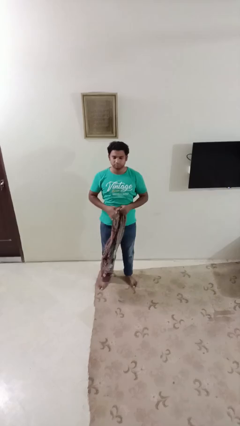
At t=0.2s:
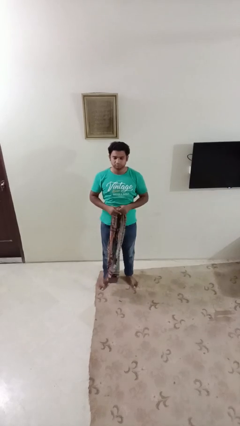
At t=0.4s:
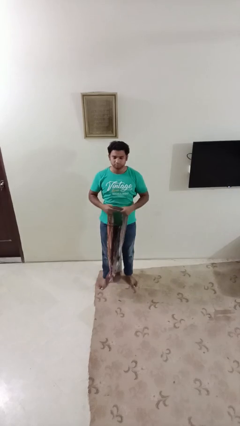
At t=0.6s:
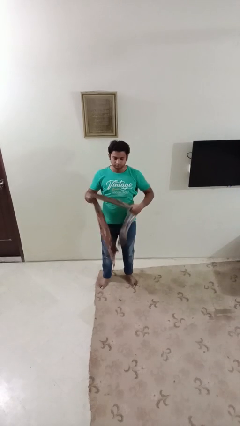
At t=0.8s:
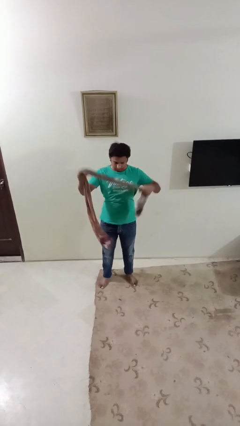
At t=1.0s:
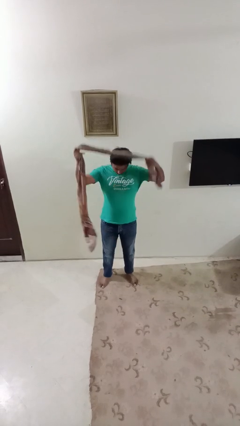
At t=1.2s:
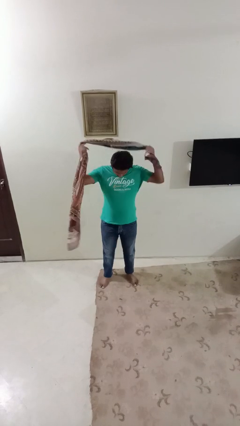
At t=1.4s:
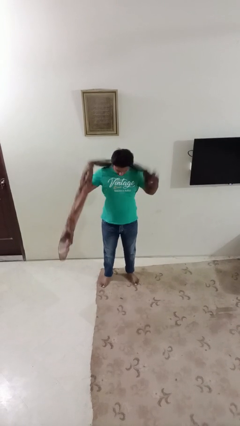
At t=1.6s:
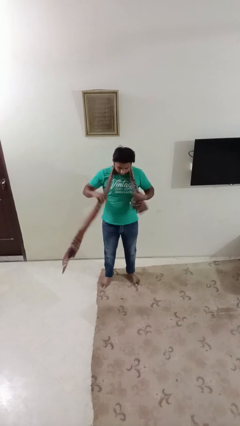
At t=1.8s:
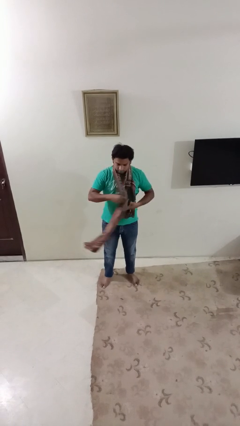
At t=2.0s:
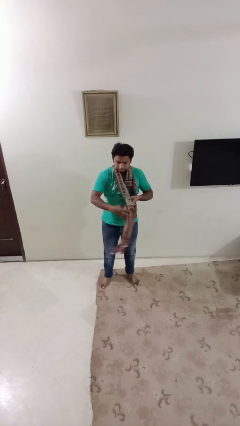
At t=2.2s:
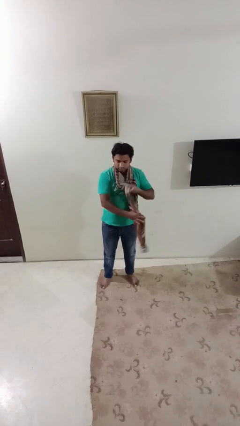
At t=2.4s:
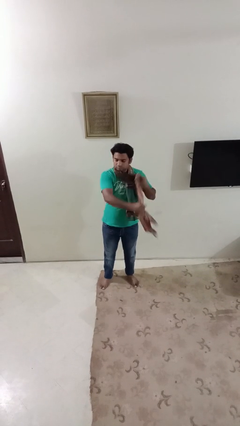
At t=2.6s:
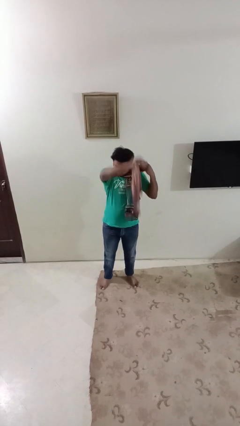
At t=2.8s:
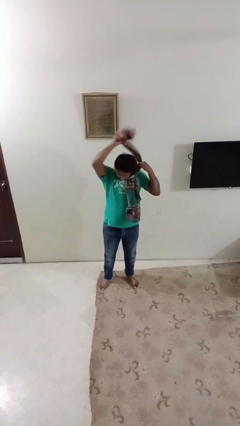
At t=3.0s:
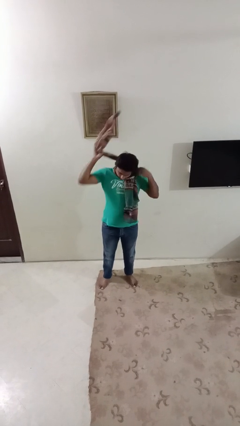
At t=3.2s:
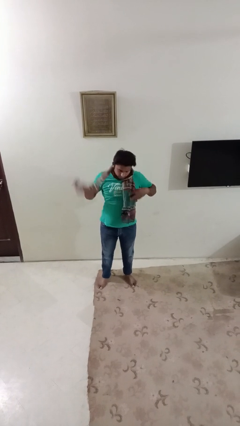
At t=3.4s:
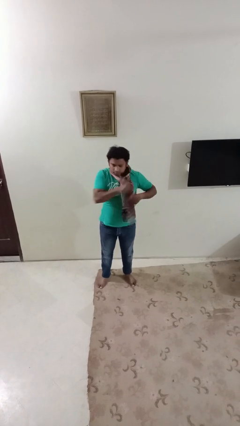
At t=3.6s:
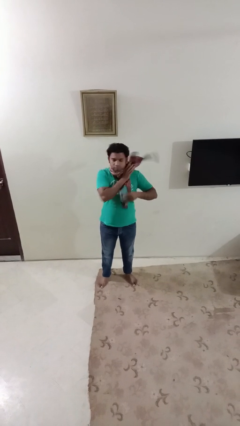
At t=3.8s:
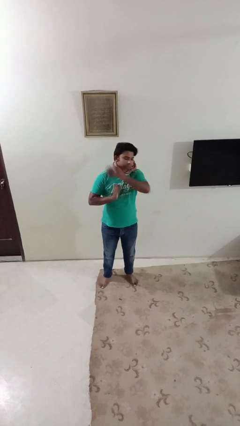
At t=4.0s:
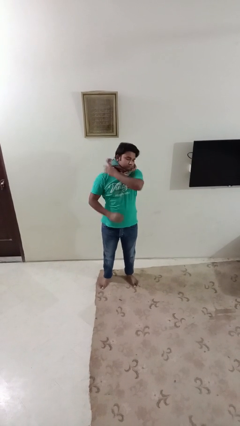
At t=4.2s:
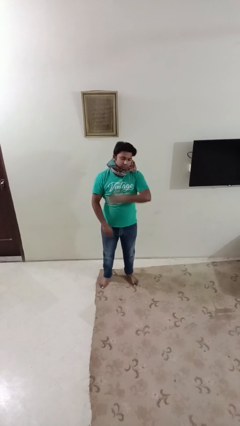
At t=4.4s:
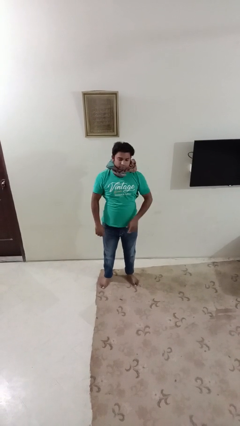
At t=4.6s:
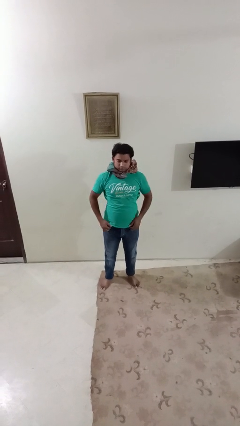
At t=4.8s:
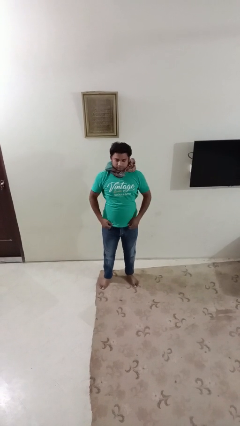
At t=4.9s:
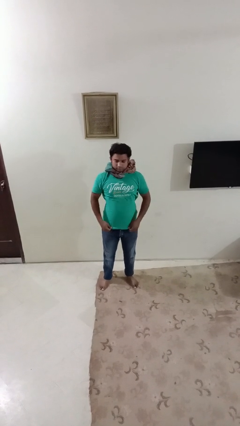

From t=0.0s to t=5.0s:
person puts on scarf

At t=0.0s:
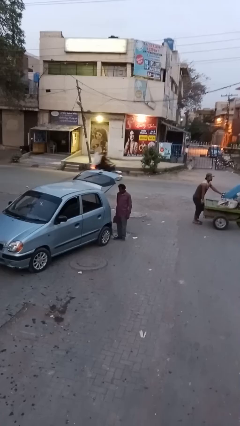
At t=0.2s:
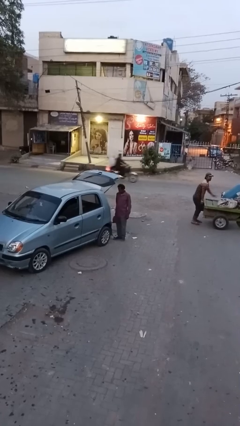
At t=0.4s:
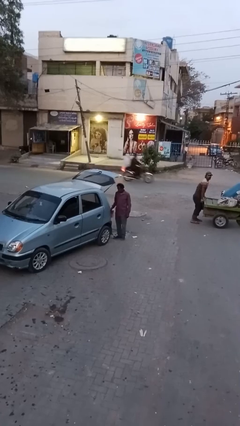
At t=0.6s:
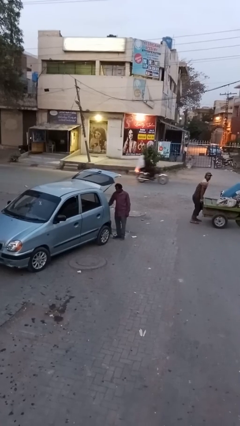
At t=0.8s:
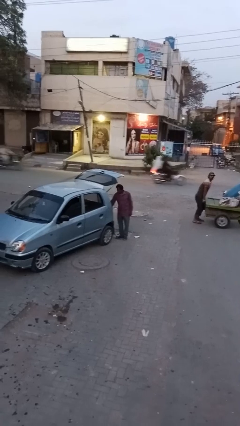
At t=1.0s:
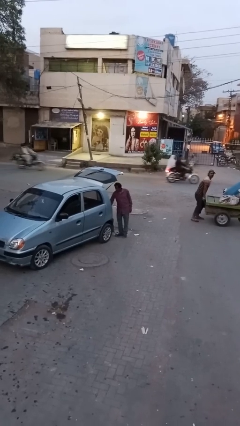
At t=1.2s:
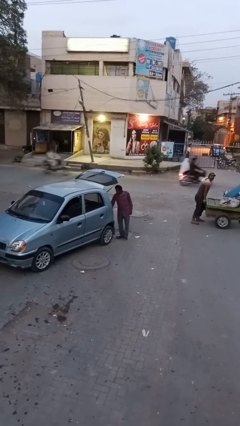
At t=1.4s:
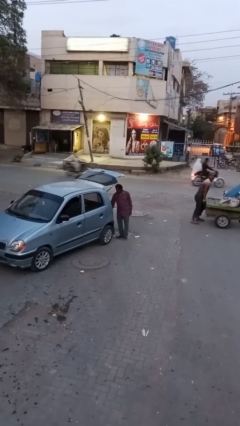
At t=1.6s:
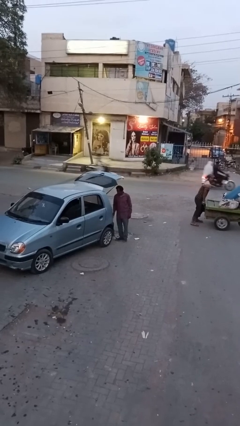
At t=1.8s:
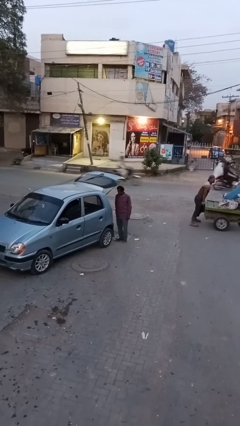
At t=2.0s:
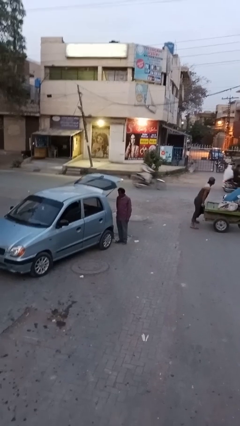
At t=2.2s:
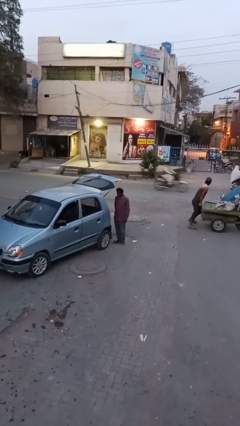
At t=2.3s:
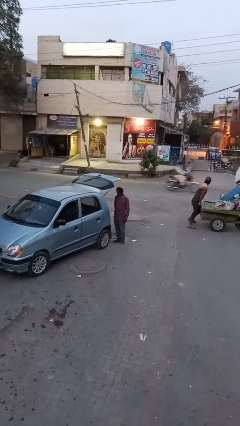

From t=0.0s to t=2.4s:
person loads car

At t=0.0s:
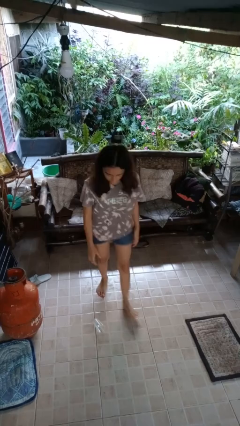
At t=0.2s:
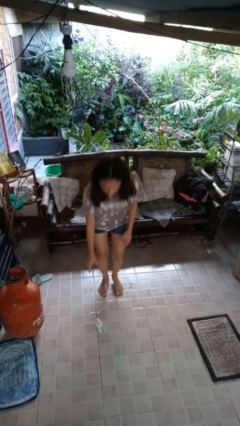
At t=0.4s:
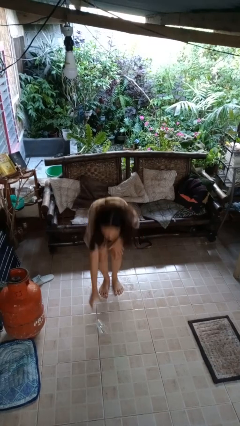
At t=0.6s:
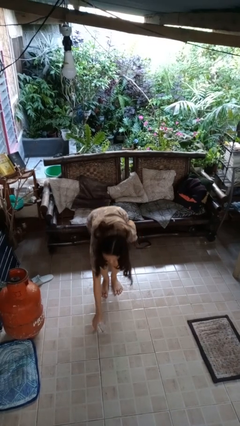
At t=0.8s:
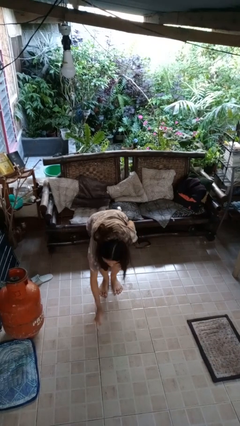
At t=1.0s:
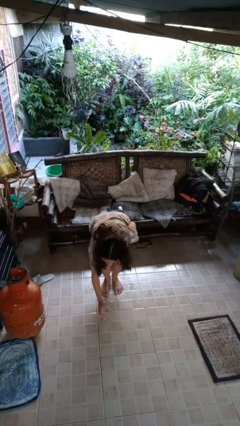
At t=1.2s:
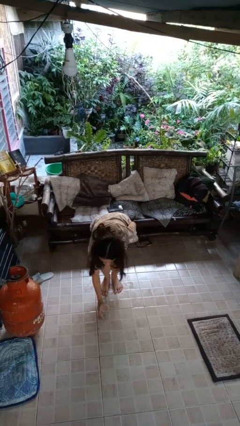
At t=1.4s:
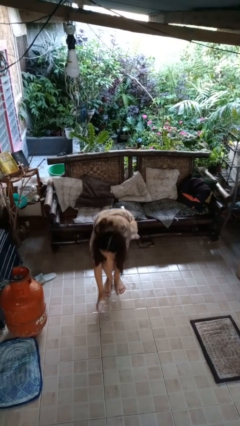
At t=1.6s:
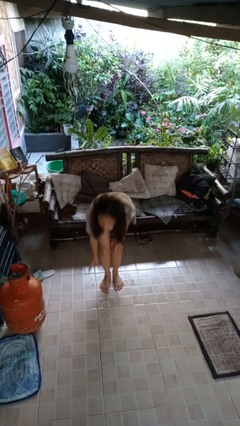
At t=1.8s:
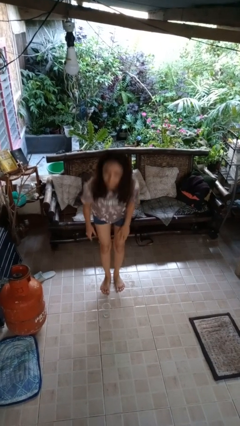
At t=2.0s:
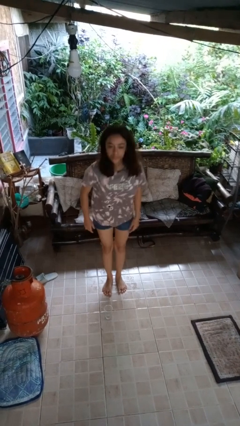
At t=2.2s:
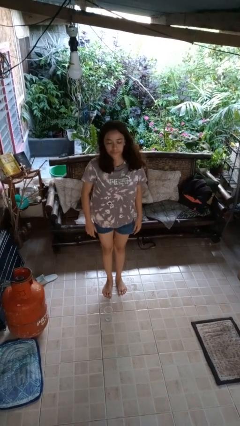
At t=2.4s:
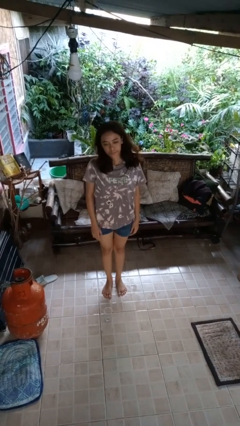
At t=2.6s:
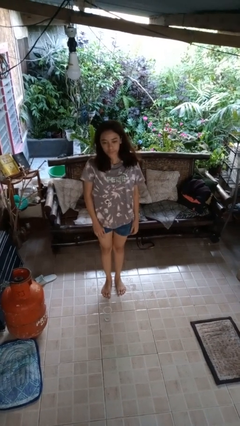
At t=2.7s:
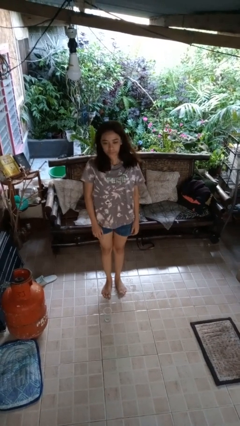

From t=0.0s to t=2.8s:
person sets upright glass

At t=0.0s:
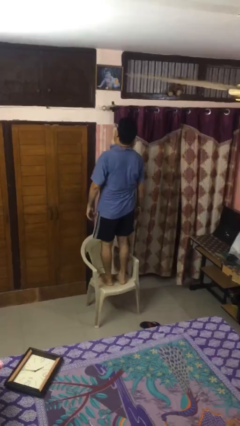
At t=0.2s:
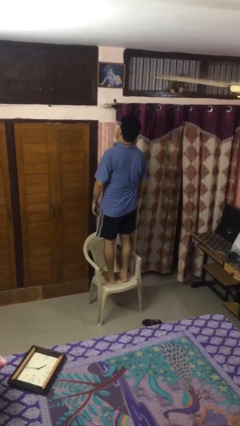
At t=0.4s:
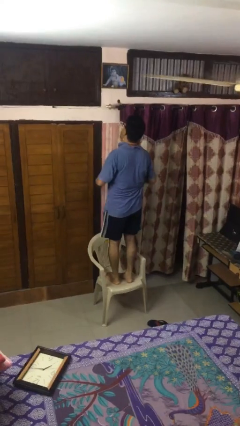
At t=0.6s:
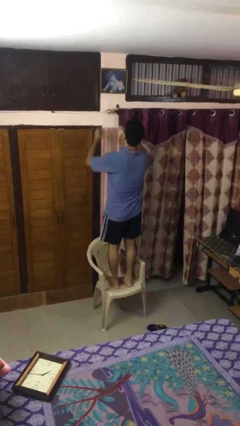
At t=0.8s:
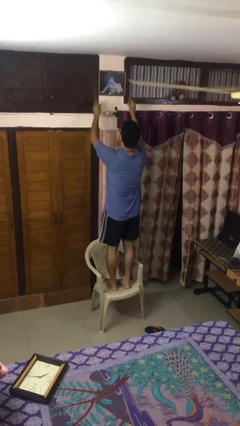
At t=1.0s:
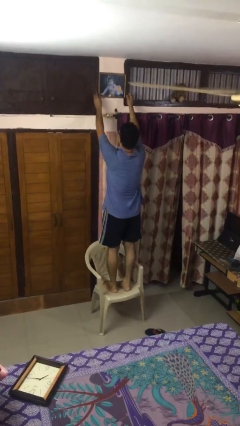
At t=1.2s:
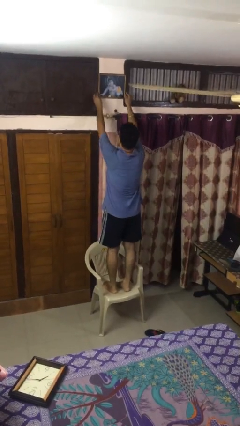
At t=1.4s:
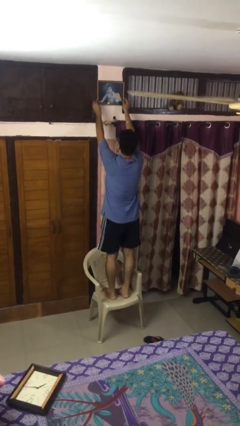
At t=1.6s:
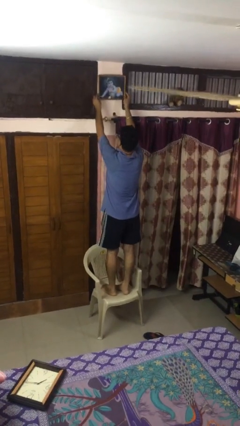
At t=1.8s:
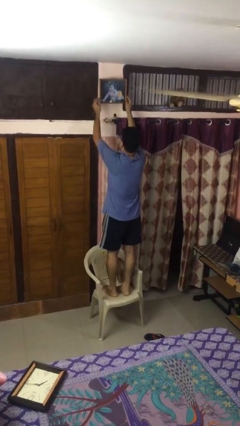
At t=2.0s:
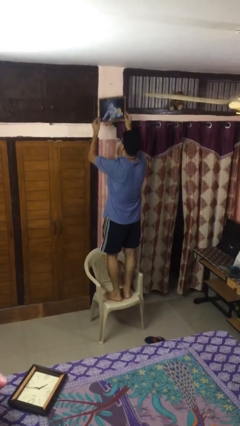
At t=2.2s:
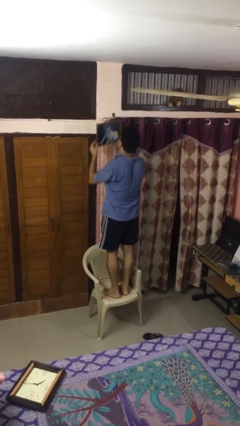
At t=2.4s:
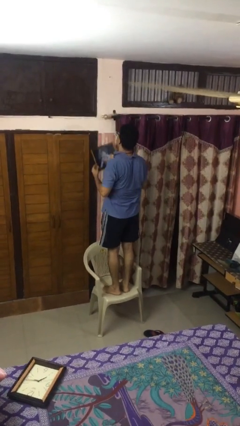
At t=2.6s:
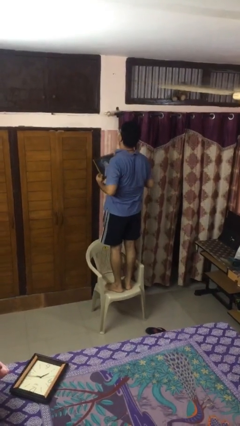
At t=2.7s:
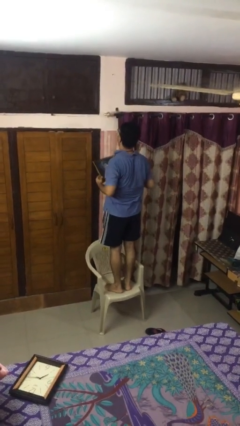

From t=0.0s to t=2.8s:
person takes down picture frame

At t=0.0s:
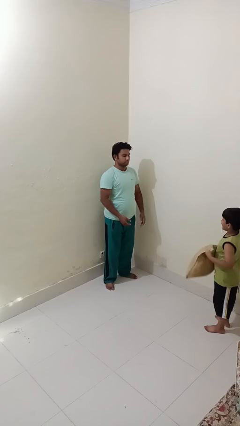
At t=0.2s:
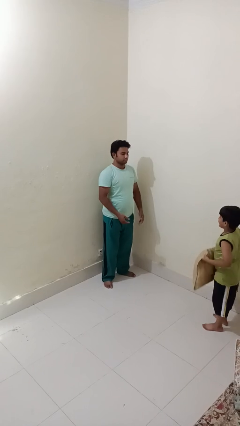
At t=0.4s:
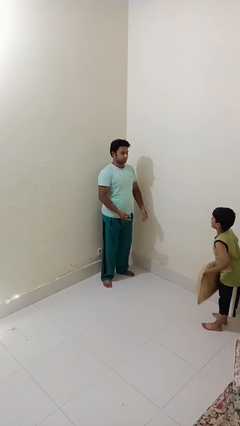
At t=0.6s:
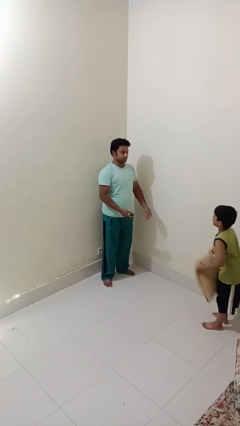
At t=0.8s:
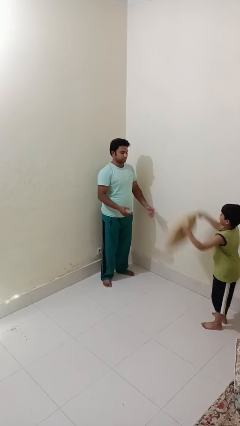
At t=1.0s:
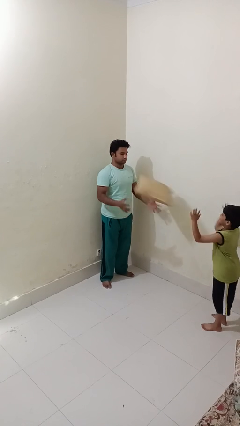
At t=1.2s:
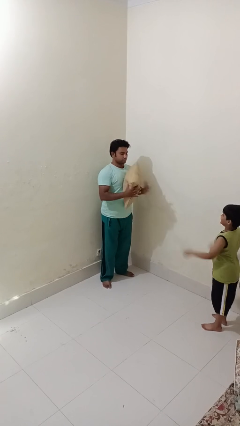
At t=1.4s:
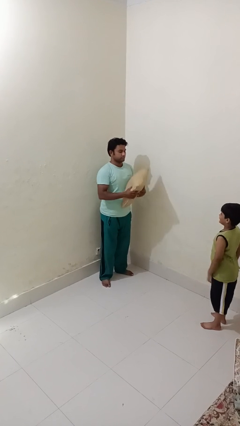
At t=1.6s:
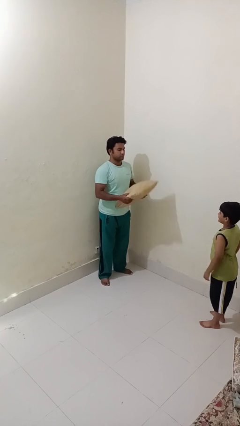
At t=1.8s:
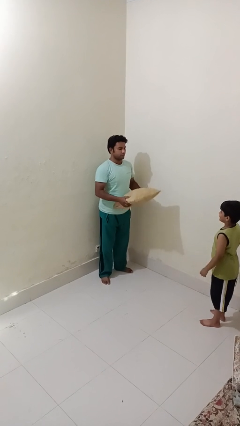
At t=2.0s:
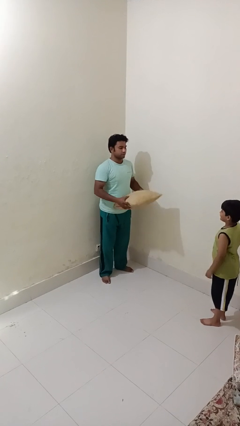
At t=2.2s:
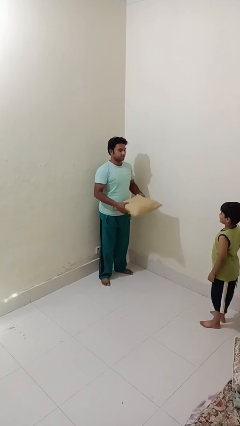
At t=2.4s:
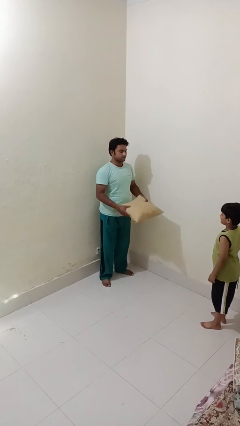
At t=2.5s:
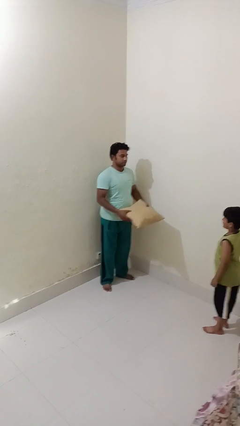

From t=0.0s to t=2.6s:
person catches object from person

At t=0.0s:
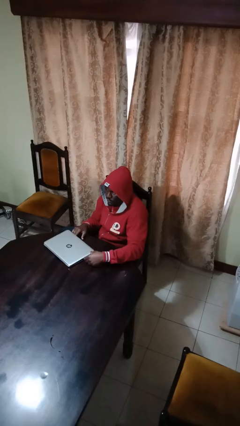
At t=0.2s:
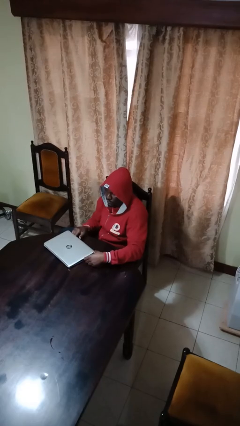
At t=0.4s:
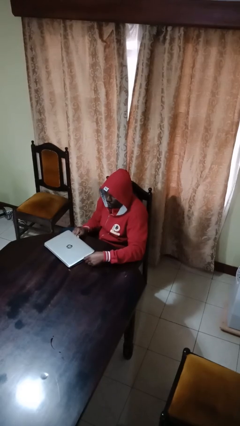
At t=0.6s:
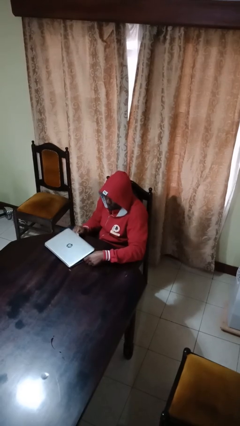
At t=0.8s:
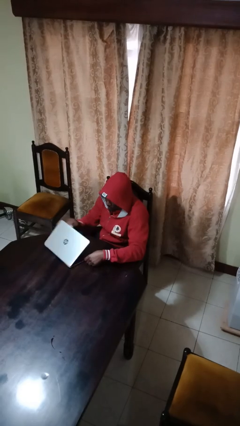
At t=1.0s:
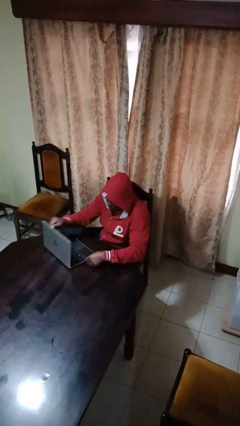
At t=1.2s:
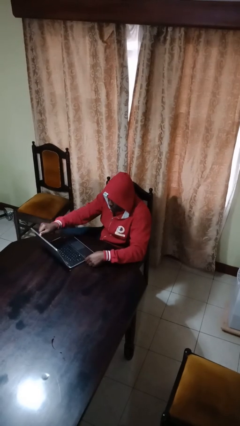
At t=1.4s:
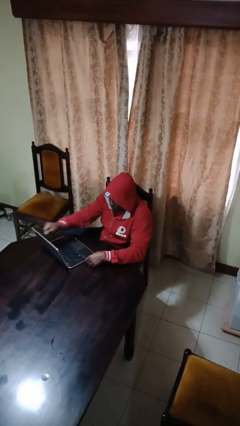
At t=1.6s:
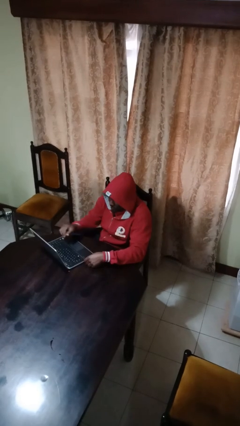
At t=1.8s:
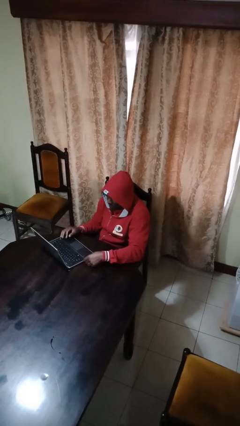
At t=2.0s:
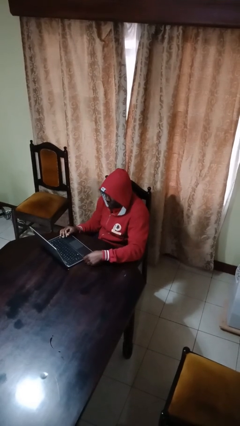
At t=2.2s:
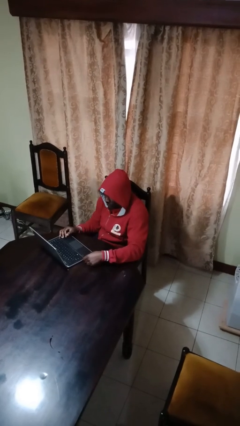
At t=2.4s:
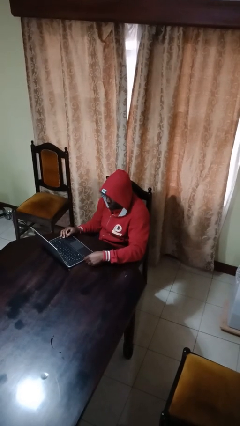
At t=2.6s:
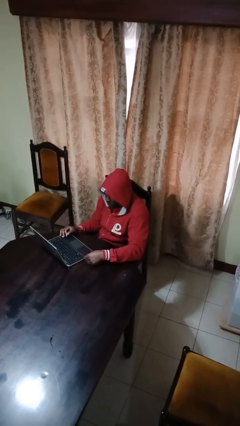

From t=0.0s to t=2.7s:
person opens laptop
